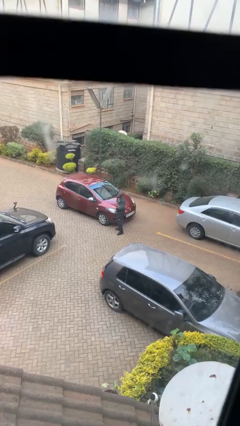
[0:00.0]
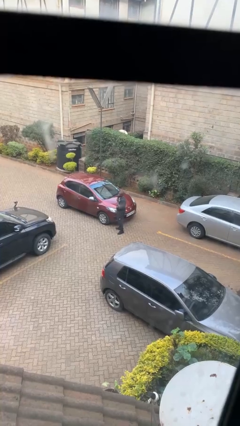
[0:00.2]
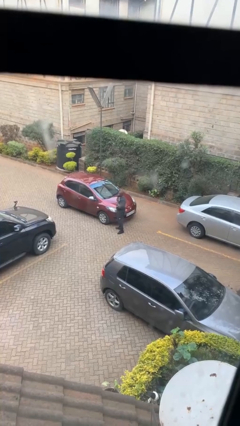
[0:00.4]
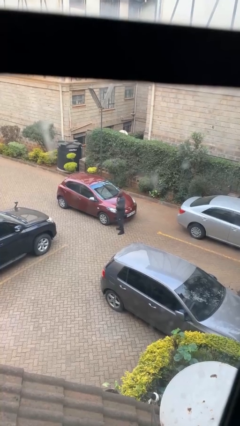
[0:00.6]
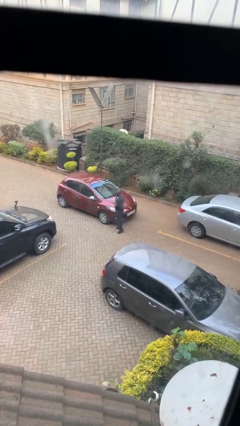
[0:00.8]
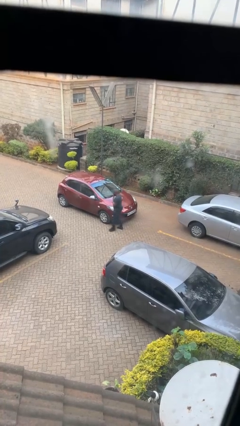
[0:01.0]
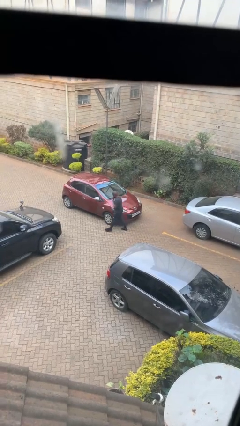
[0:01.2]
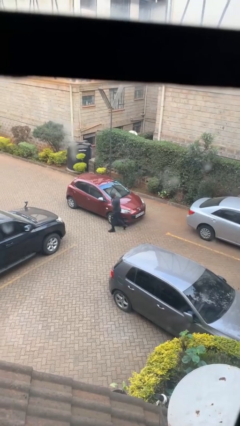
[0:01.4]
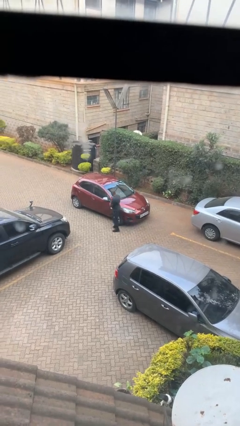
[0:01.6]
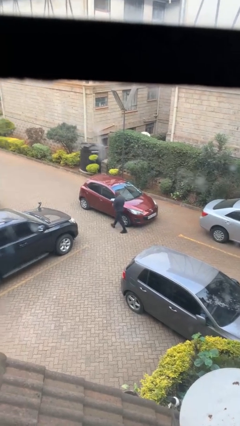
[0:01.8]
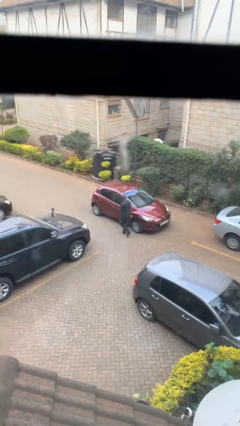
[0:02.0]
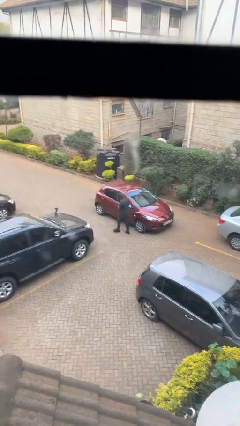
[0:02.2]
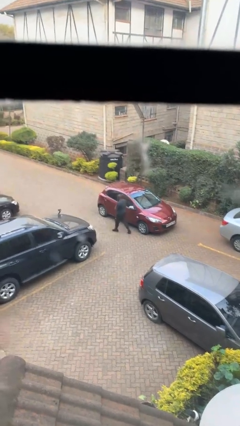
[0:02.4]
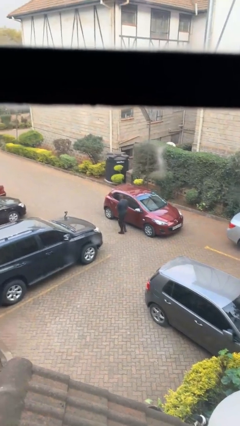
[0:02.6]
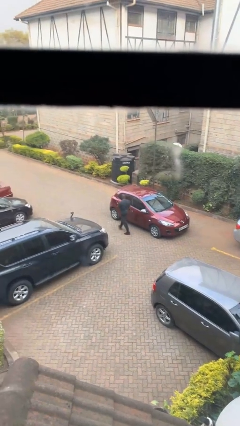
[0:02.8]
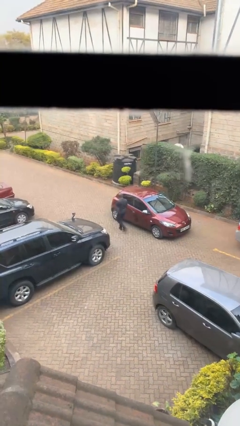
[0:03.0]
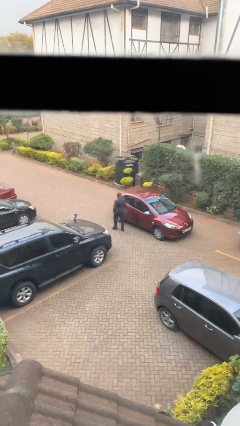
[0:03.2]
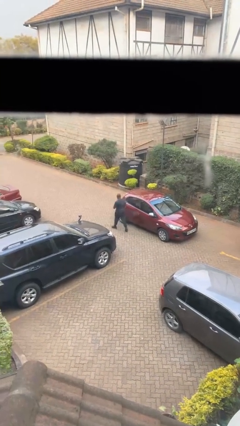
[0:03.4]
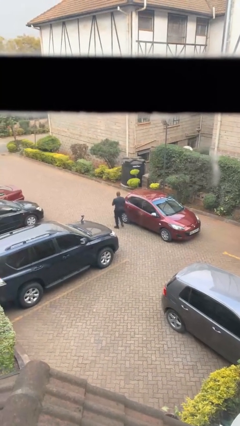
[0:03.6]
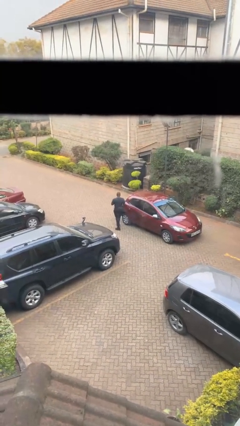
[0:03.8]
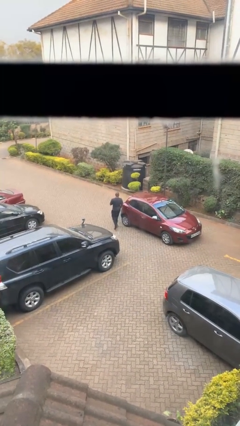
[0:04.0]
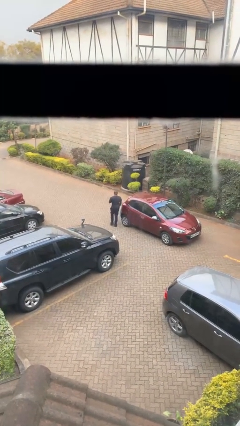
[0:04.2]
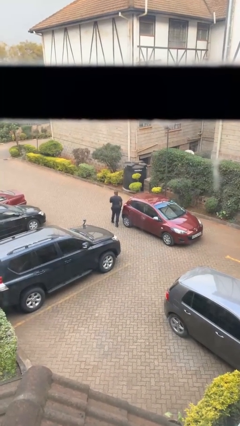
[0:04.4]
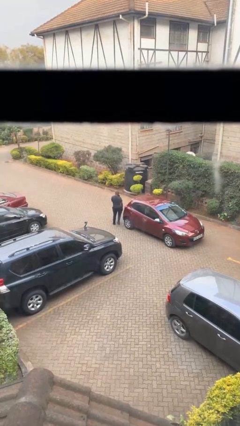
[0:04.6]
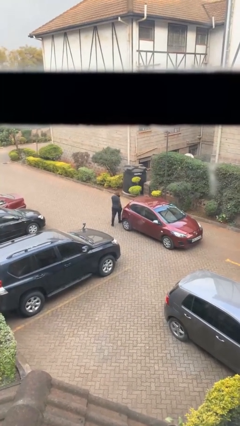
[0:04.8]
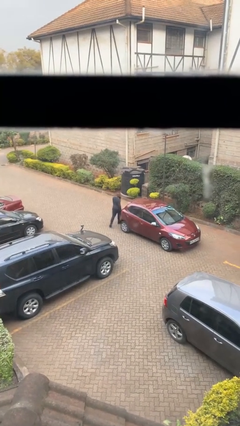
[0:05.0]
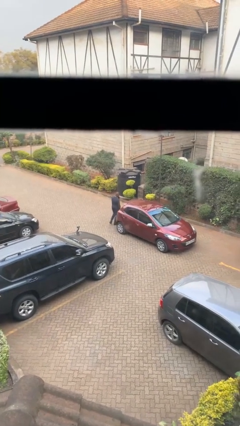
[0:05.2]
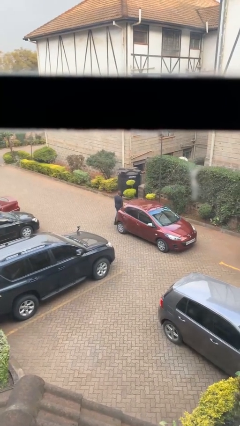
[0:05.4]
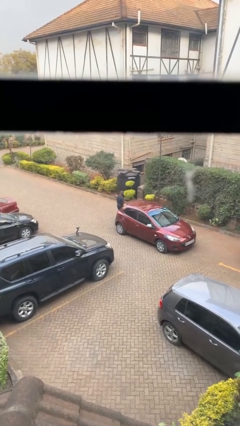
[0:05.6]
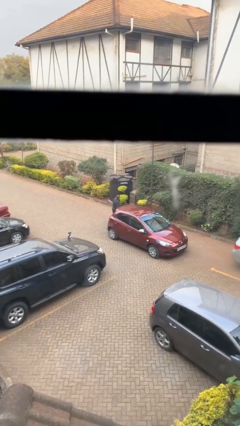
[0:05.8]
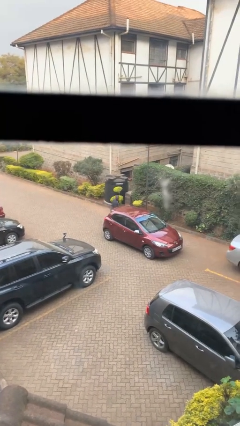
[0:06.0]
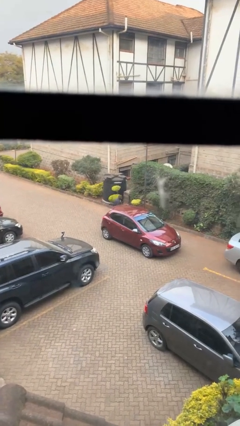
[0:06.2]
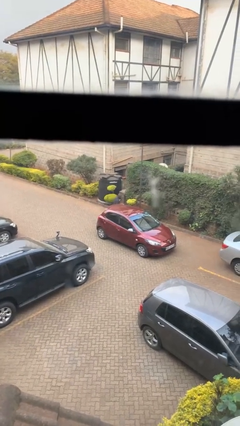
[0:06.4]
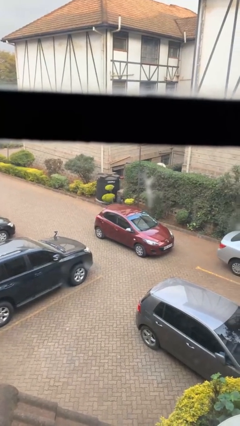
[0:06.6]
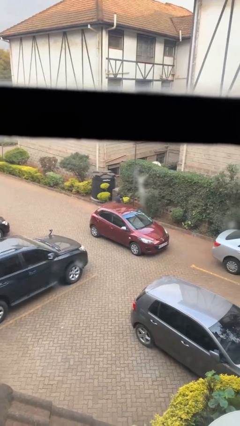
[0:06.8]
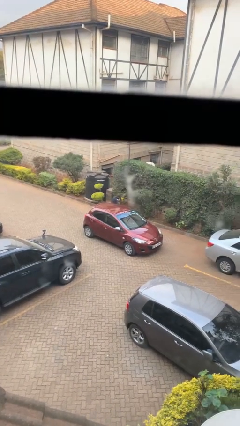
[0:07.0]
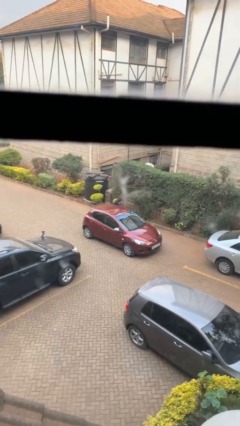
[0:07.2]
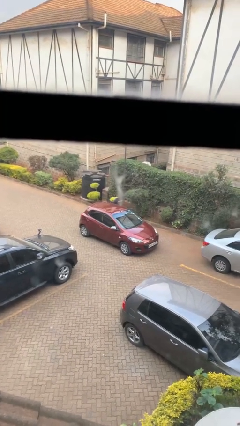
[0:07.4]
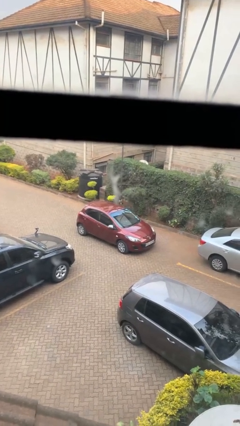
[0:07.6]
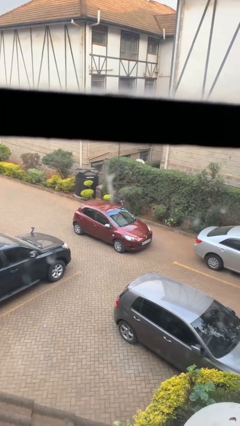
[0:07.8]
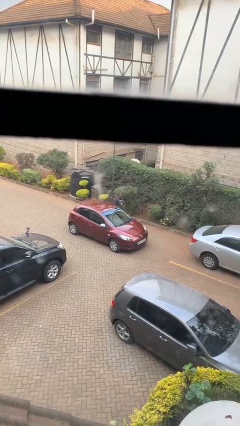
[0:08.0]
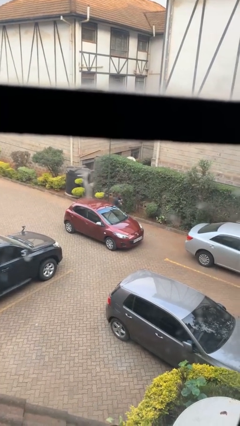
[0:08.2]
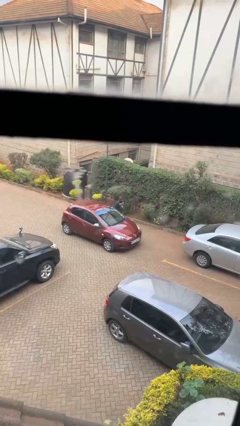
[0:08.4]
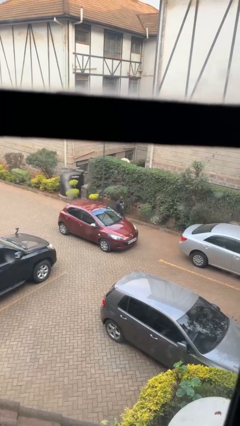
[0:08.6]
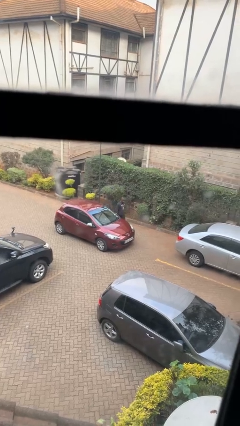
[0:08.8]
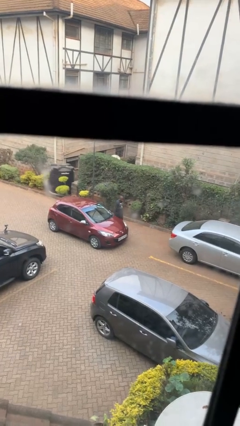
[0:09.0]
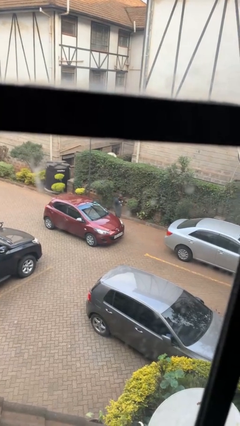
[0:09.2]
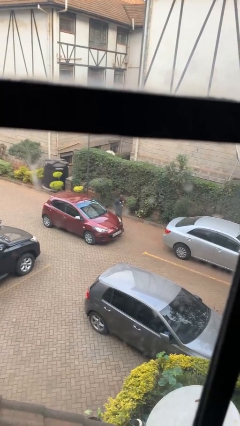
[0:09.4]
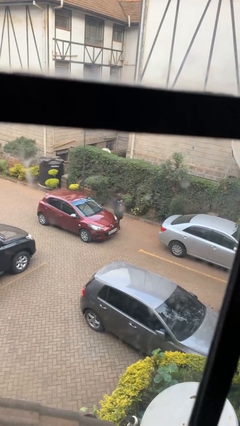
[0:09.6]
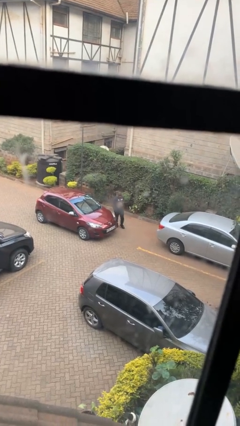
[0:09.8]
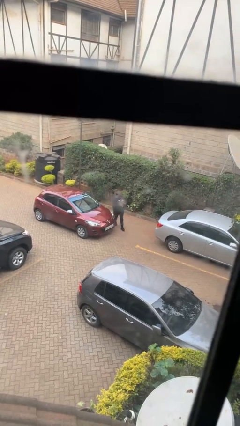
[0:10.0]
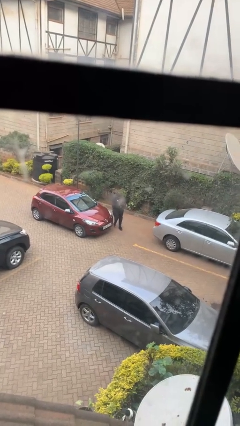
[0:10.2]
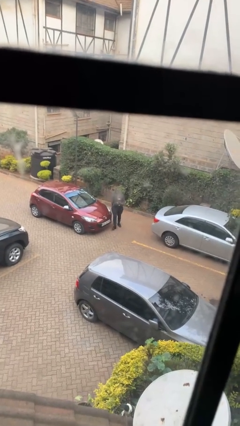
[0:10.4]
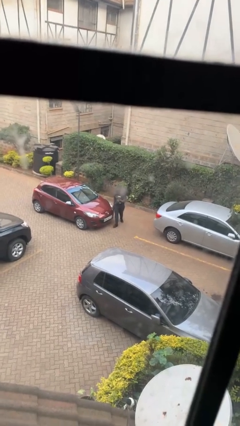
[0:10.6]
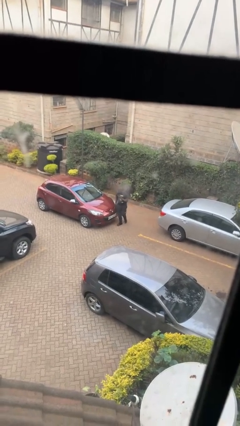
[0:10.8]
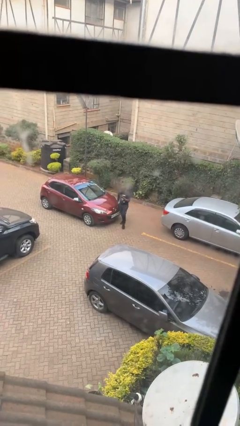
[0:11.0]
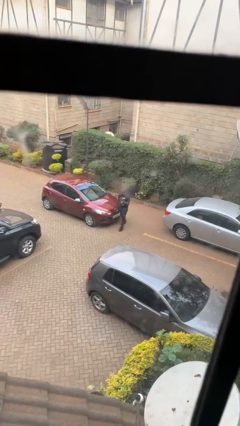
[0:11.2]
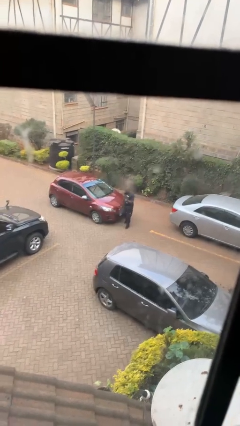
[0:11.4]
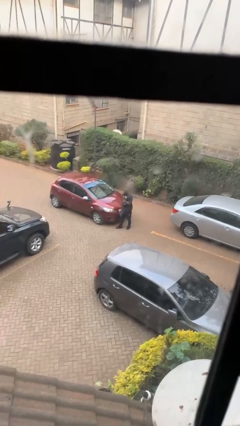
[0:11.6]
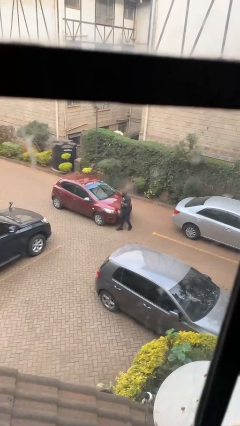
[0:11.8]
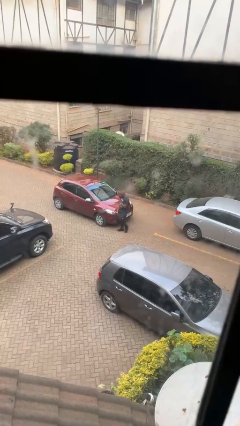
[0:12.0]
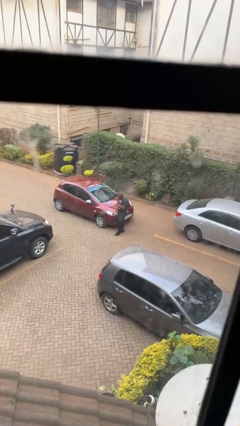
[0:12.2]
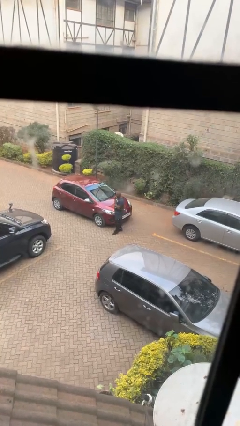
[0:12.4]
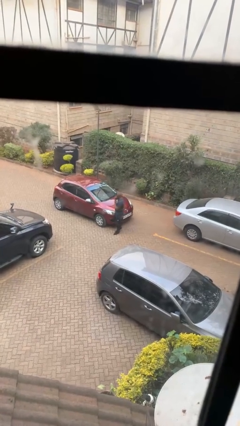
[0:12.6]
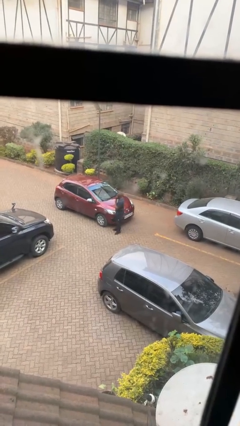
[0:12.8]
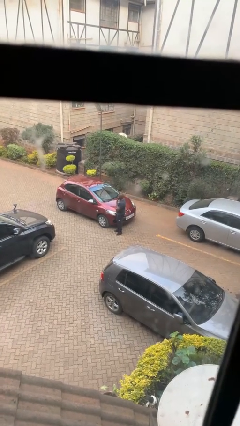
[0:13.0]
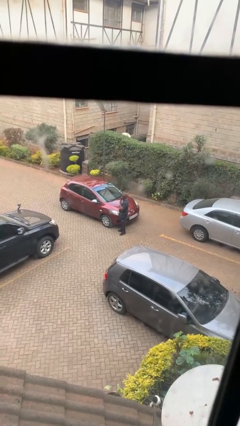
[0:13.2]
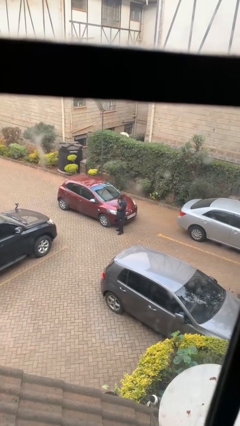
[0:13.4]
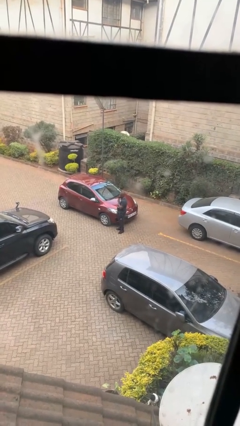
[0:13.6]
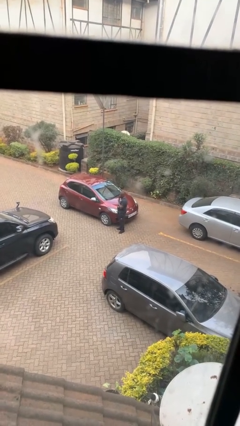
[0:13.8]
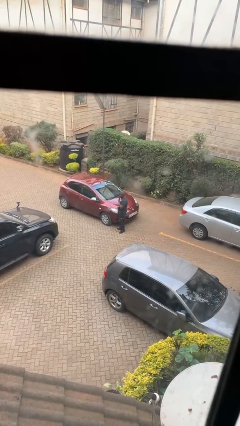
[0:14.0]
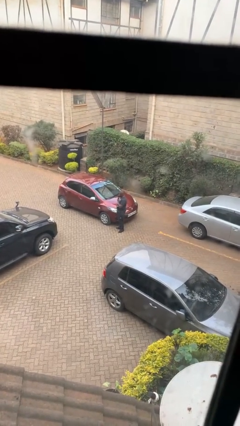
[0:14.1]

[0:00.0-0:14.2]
person walks around car

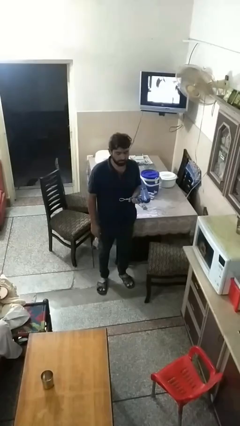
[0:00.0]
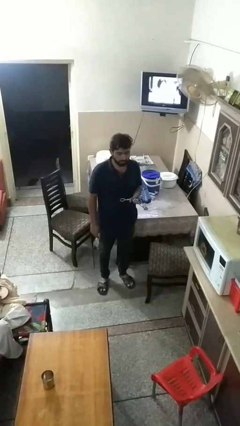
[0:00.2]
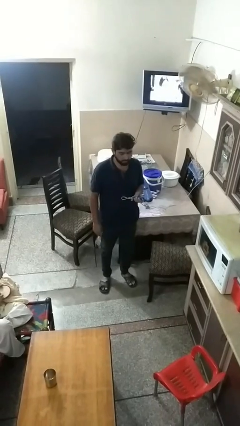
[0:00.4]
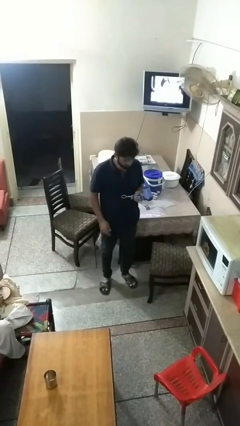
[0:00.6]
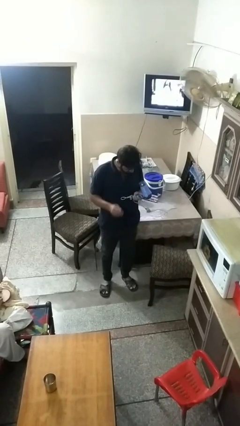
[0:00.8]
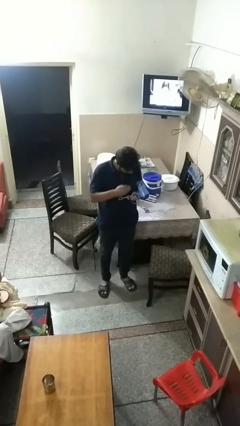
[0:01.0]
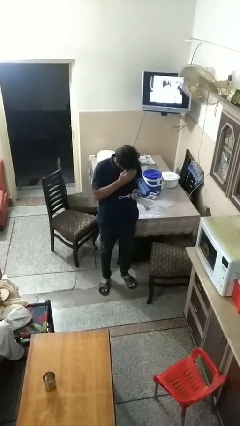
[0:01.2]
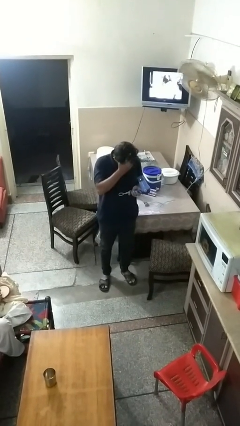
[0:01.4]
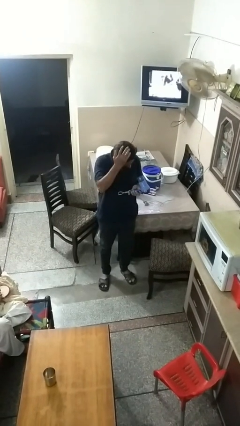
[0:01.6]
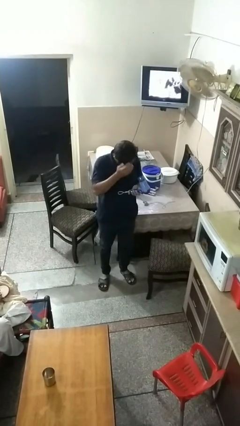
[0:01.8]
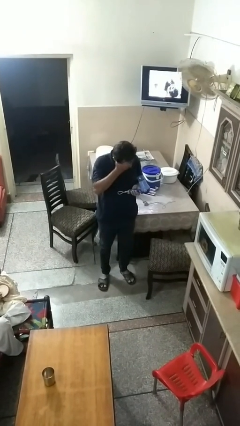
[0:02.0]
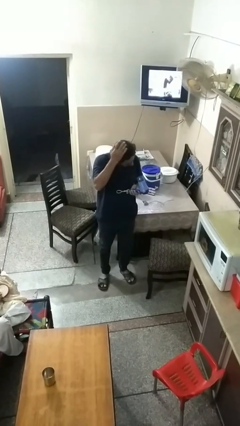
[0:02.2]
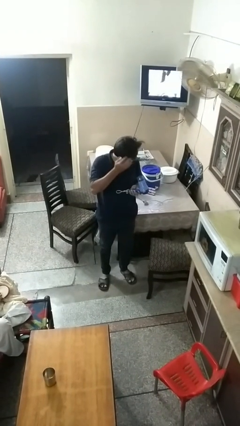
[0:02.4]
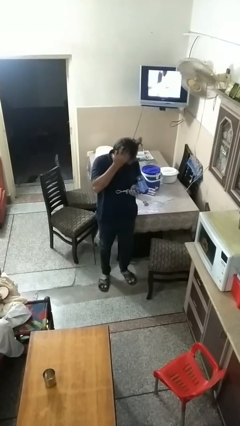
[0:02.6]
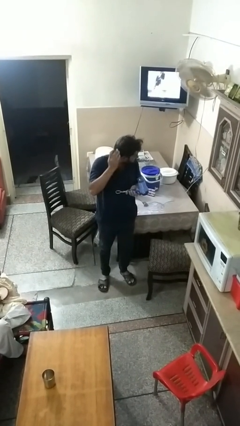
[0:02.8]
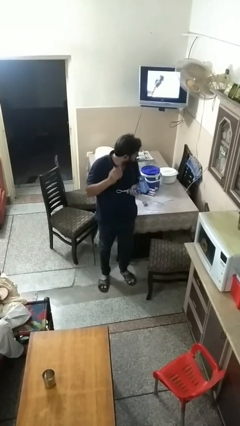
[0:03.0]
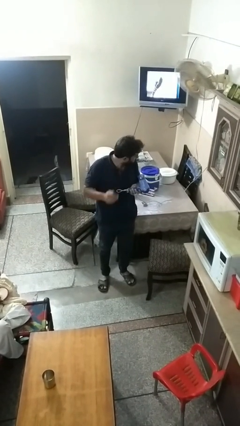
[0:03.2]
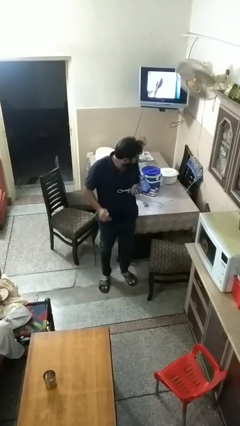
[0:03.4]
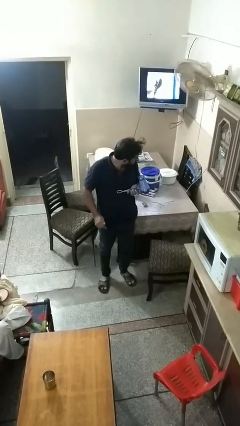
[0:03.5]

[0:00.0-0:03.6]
person dries hair with hairdryer
